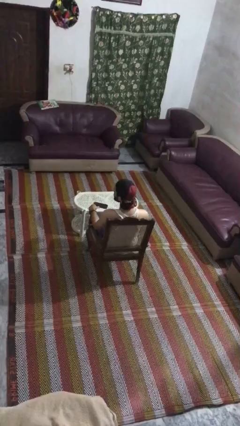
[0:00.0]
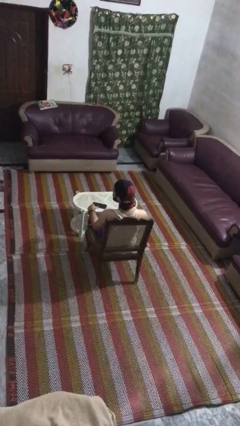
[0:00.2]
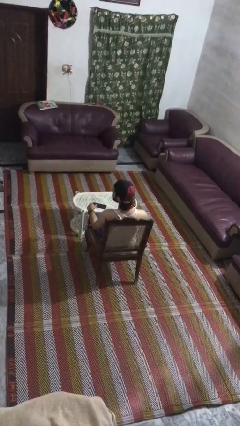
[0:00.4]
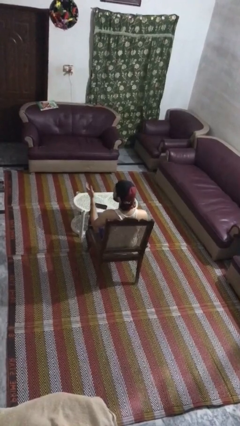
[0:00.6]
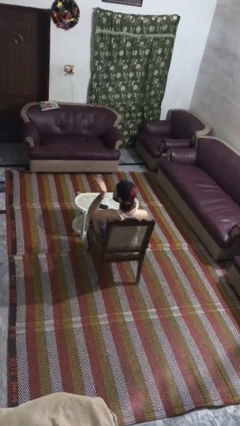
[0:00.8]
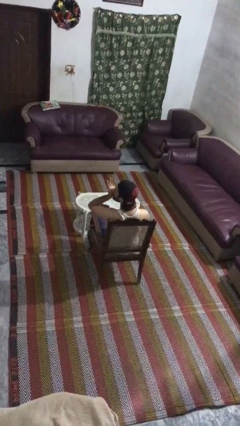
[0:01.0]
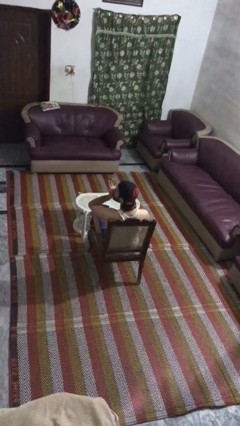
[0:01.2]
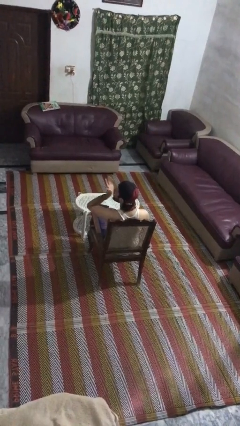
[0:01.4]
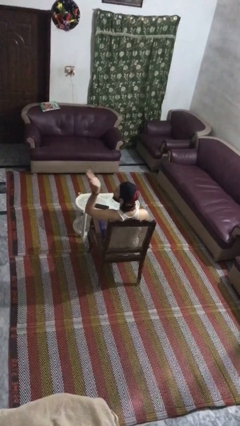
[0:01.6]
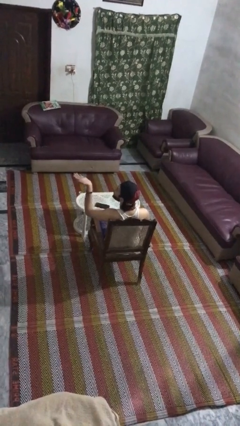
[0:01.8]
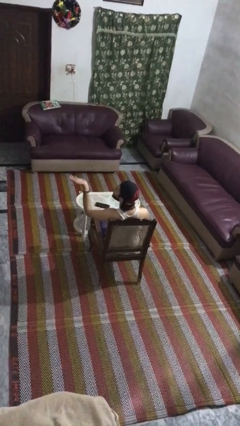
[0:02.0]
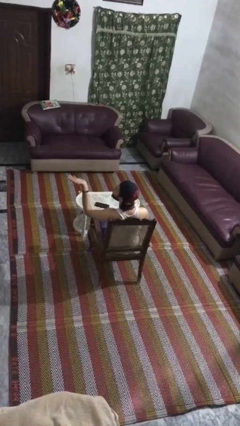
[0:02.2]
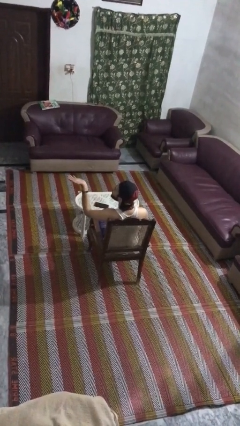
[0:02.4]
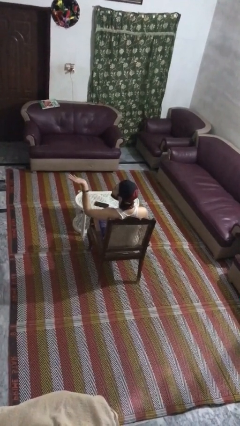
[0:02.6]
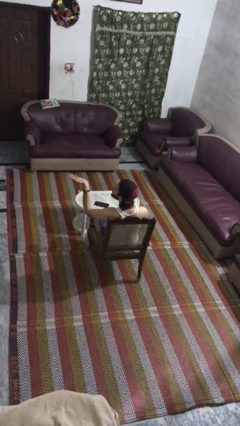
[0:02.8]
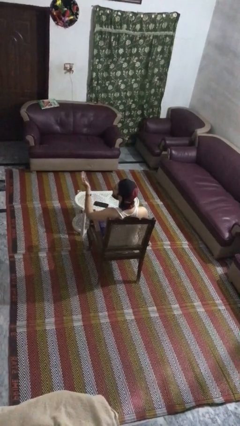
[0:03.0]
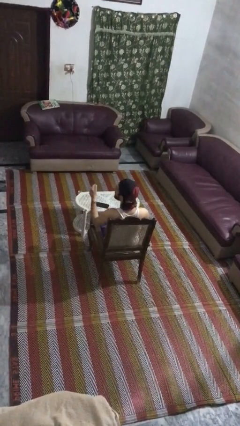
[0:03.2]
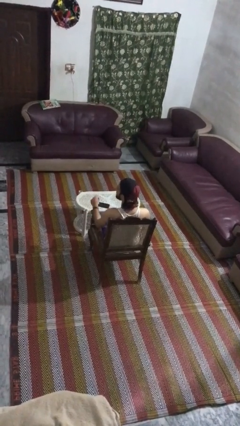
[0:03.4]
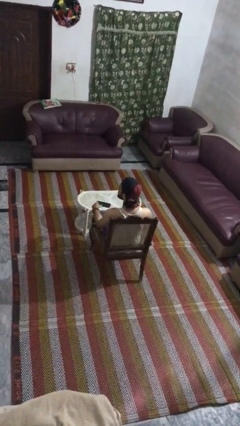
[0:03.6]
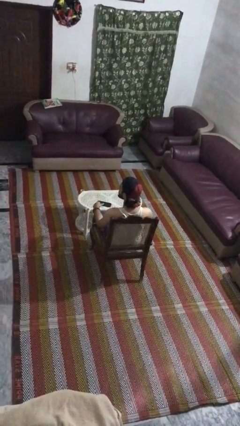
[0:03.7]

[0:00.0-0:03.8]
person gestures blow kiss

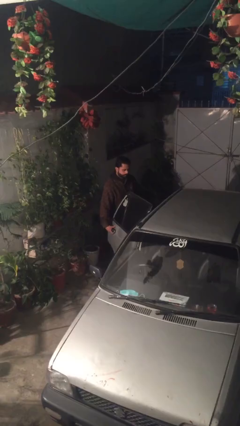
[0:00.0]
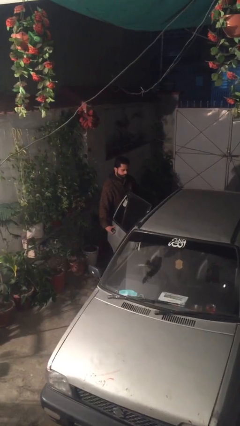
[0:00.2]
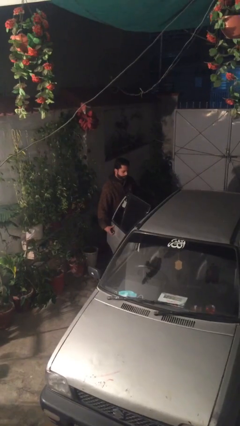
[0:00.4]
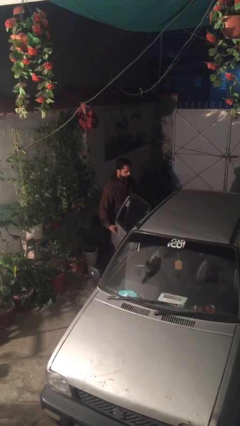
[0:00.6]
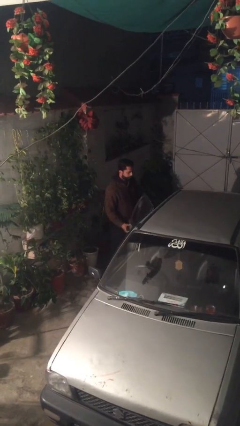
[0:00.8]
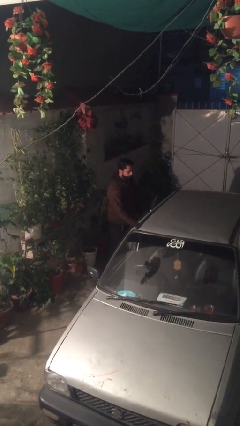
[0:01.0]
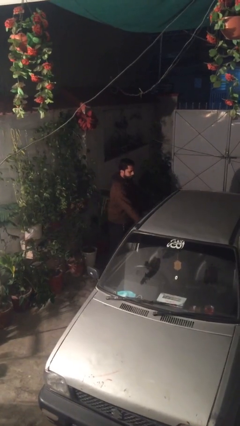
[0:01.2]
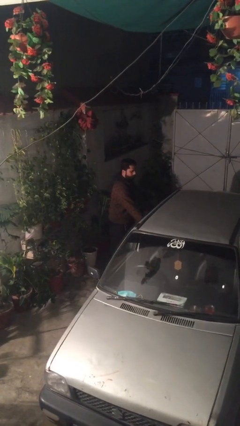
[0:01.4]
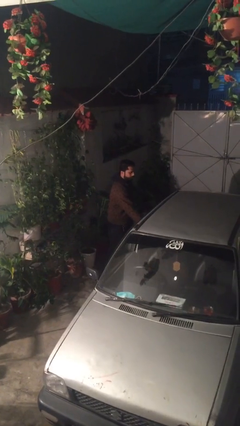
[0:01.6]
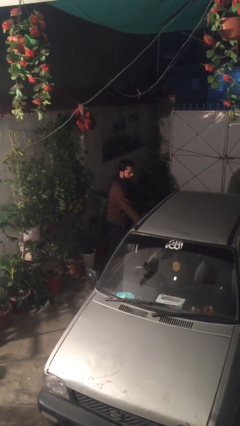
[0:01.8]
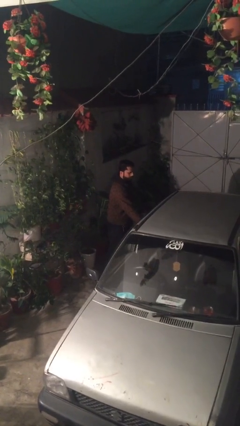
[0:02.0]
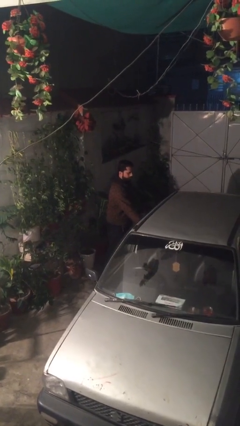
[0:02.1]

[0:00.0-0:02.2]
person closes car door

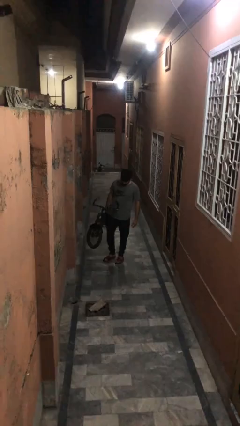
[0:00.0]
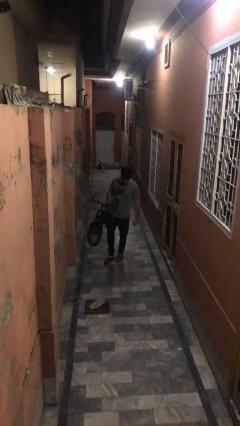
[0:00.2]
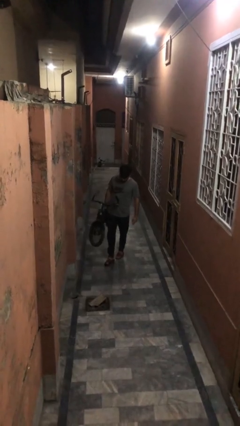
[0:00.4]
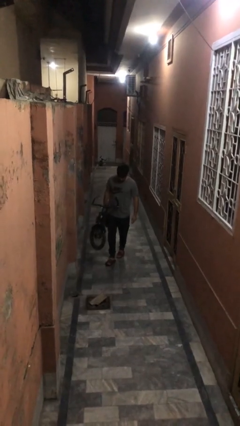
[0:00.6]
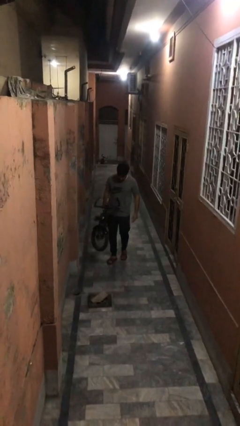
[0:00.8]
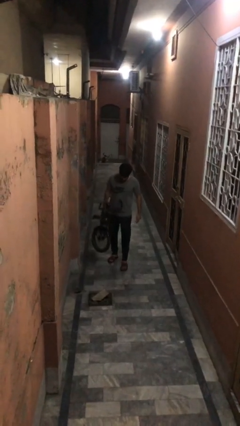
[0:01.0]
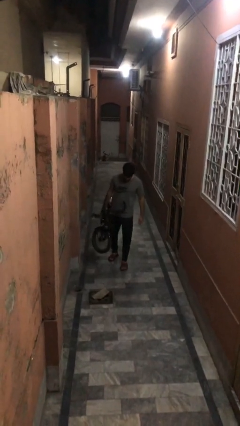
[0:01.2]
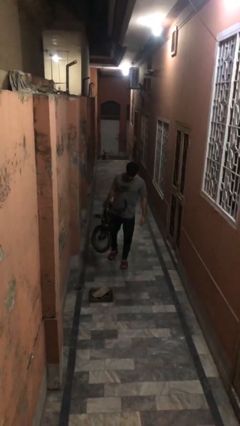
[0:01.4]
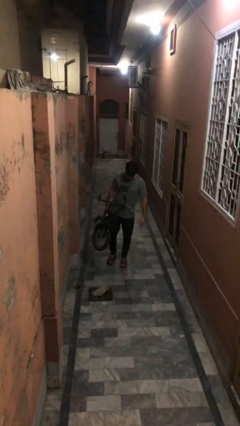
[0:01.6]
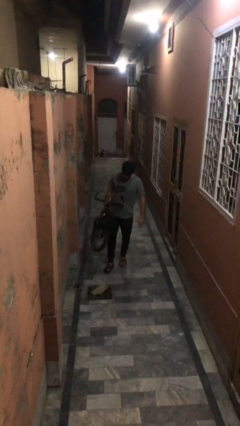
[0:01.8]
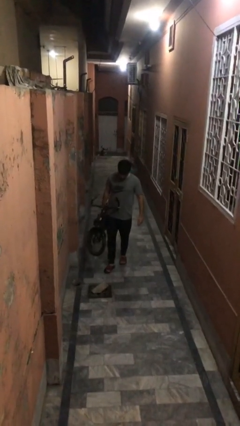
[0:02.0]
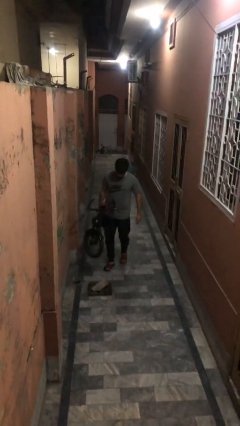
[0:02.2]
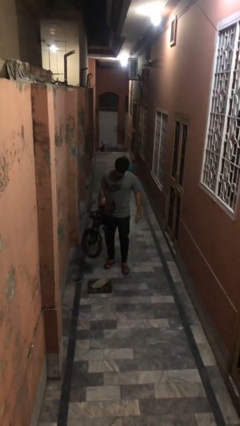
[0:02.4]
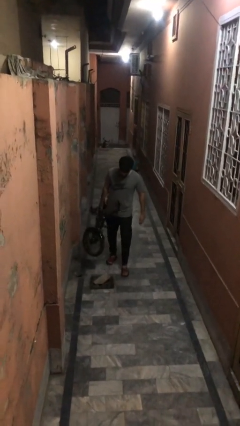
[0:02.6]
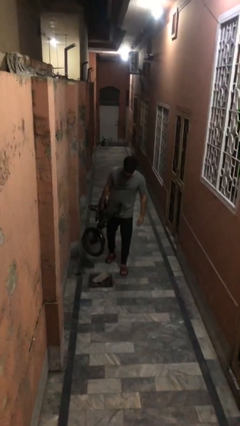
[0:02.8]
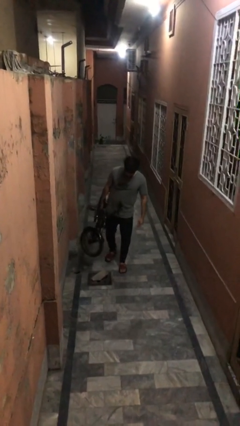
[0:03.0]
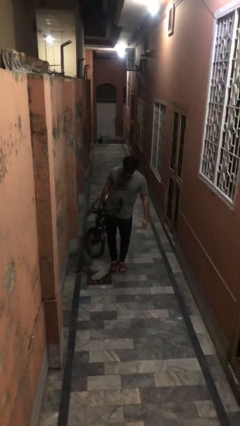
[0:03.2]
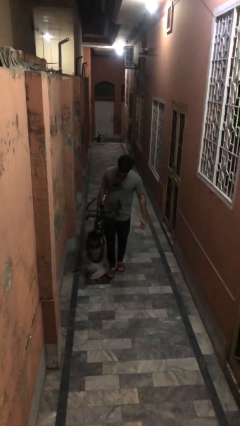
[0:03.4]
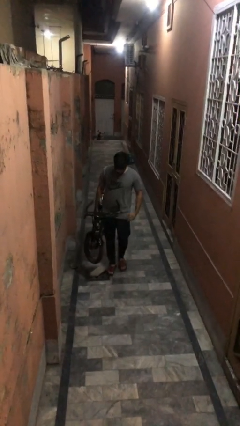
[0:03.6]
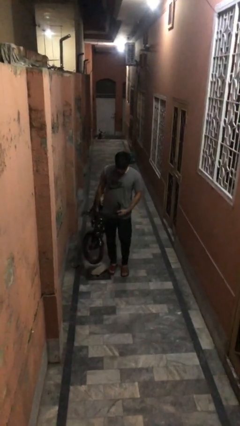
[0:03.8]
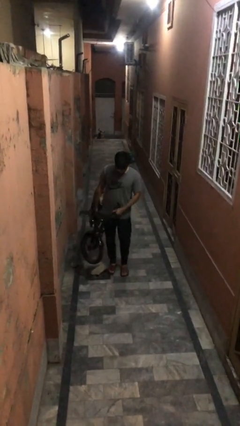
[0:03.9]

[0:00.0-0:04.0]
person carries bicycle

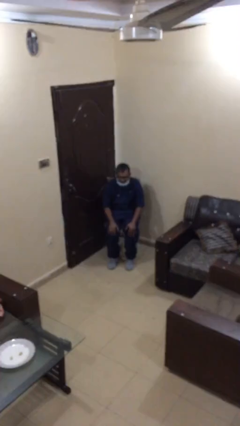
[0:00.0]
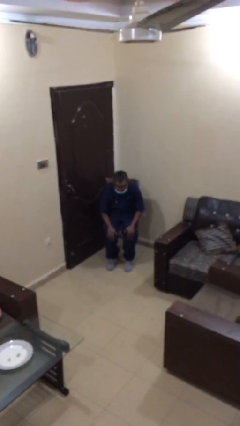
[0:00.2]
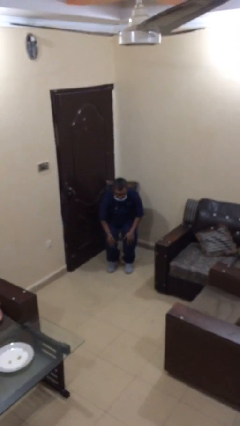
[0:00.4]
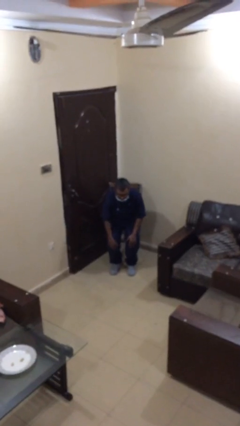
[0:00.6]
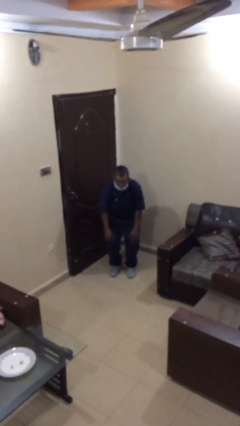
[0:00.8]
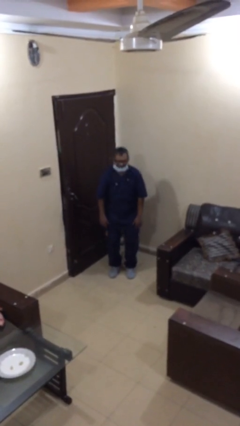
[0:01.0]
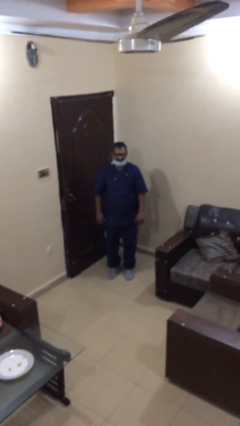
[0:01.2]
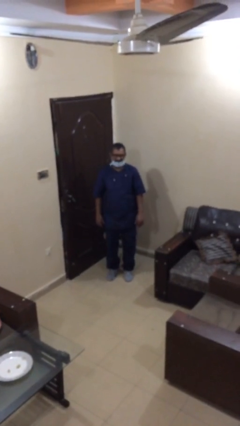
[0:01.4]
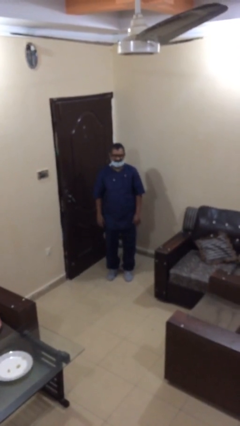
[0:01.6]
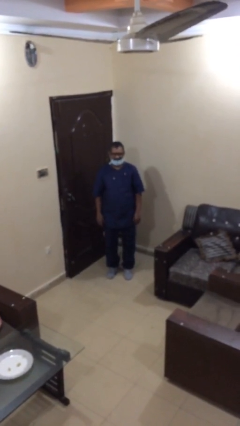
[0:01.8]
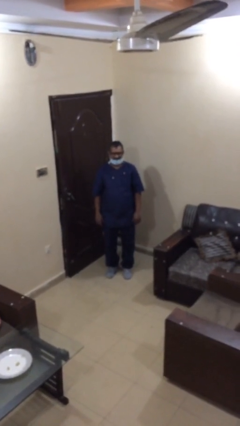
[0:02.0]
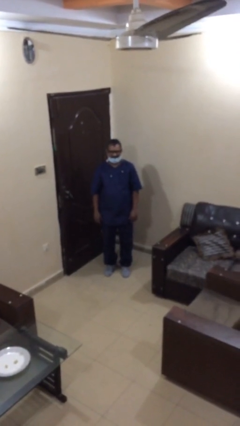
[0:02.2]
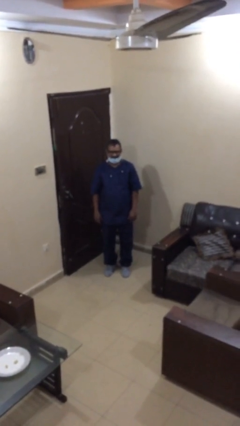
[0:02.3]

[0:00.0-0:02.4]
person stands up

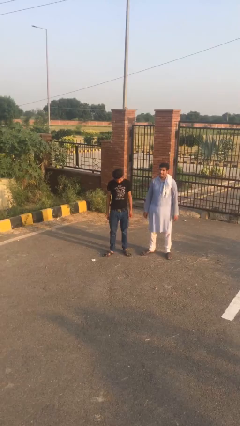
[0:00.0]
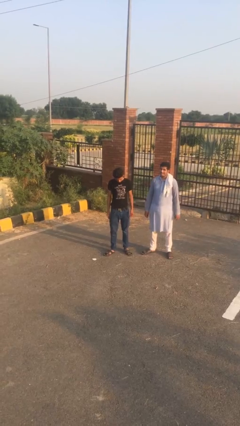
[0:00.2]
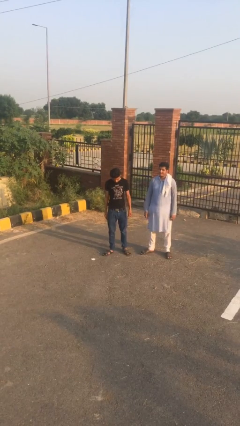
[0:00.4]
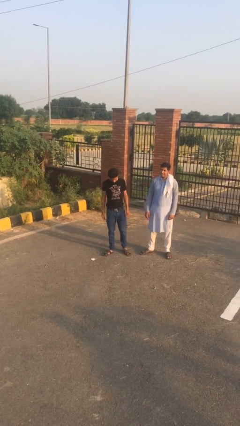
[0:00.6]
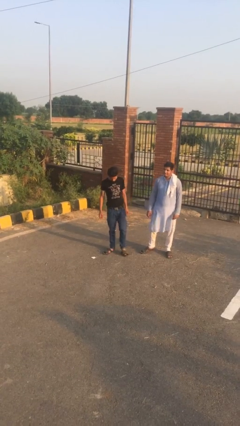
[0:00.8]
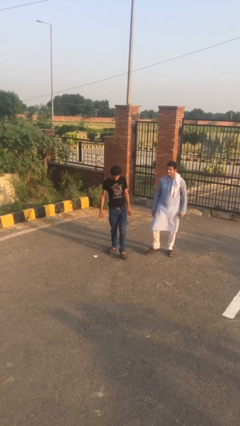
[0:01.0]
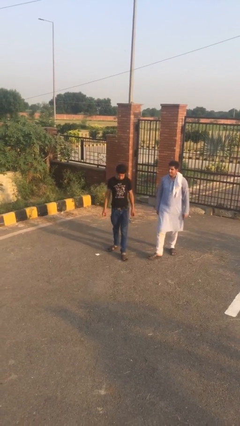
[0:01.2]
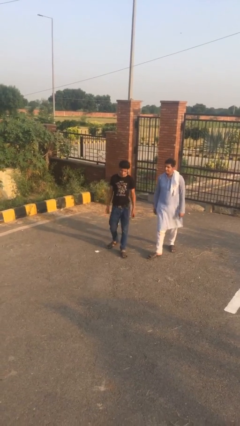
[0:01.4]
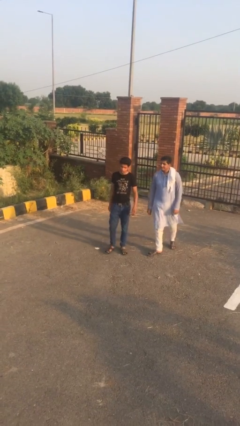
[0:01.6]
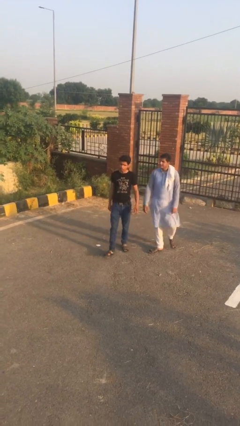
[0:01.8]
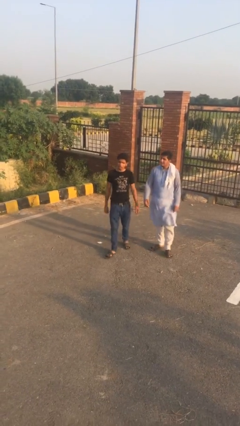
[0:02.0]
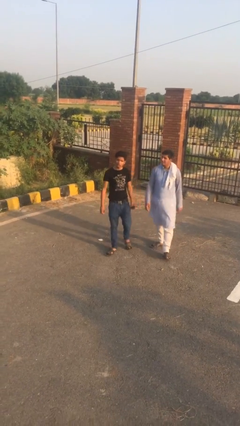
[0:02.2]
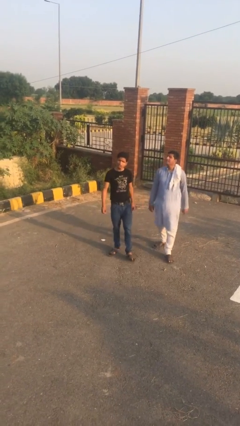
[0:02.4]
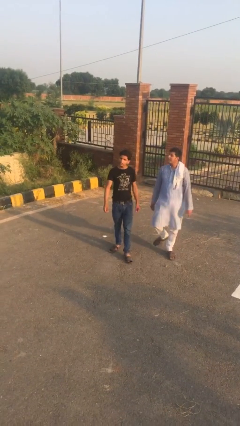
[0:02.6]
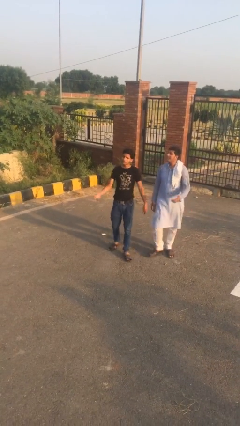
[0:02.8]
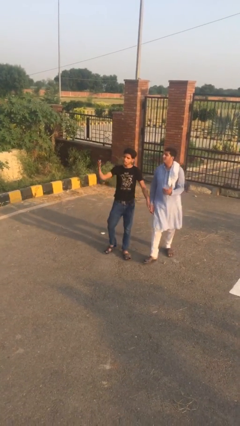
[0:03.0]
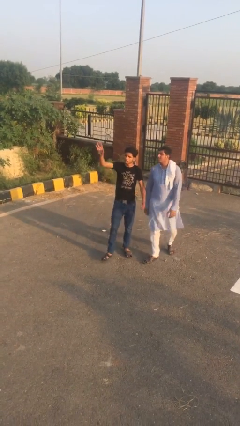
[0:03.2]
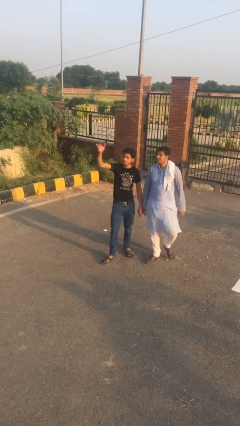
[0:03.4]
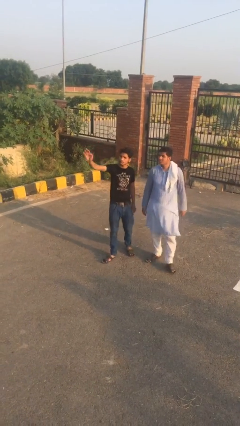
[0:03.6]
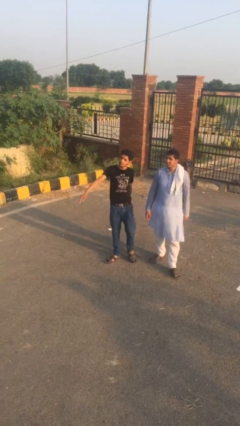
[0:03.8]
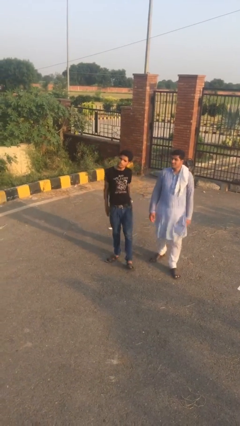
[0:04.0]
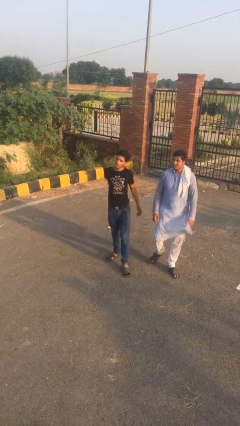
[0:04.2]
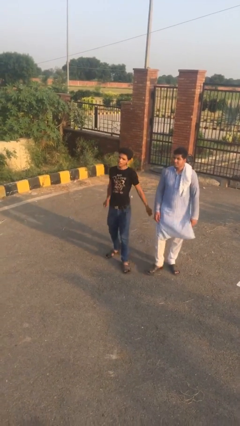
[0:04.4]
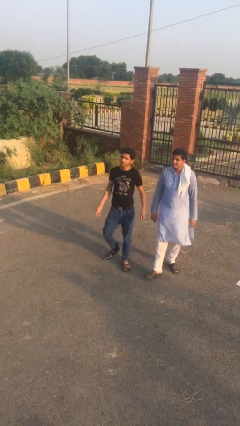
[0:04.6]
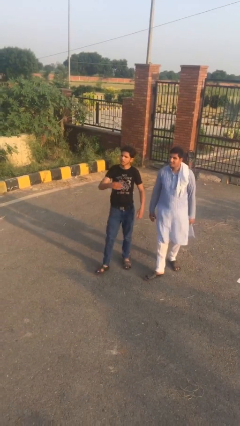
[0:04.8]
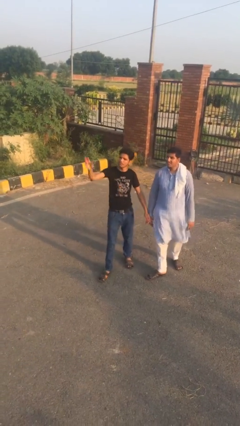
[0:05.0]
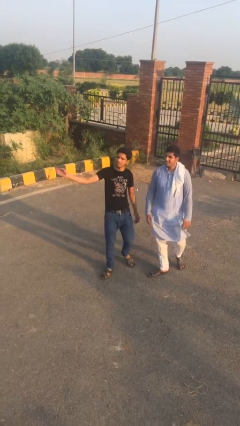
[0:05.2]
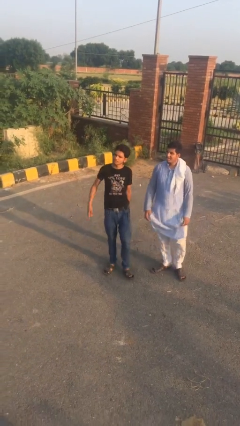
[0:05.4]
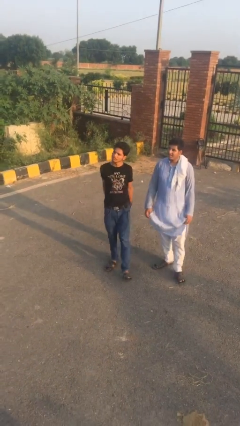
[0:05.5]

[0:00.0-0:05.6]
person talks to person
